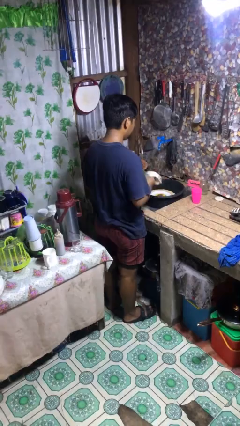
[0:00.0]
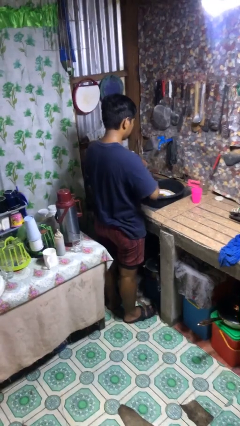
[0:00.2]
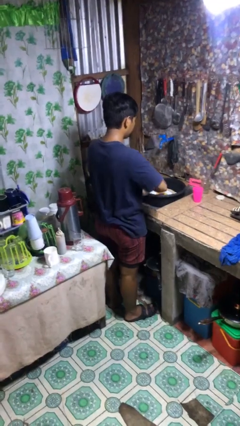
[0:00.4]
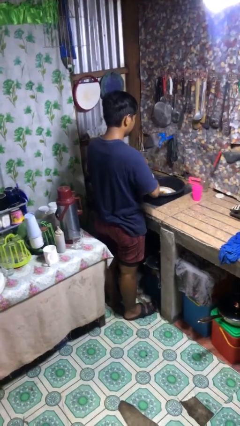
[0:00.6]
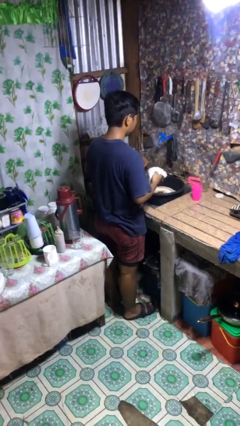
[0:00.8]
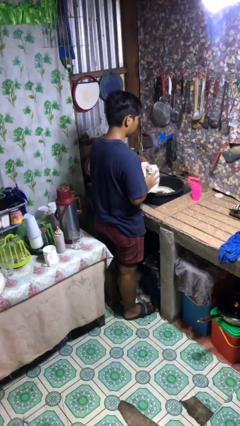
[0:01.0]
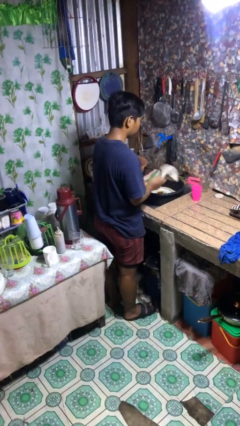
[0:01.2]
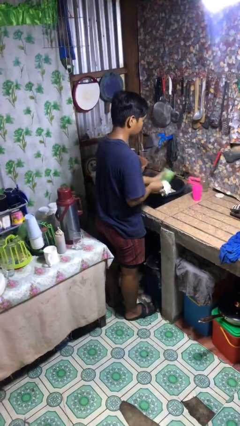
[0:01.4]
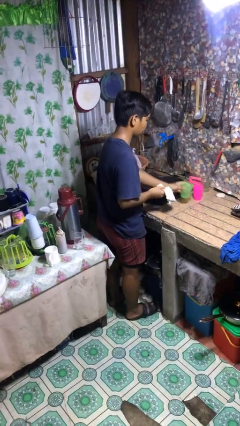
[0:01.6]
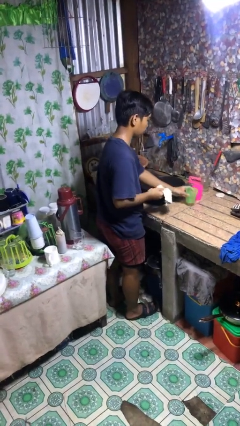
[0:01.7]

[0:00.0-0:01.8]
person dries dish

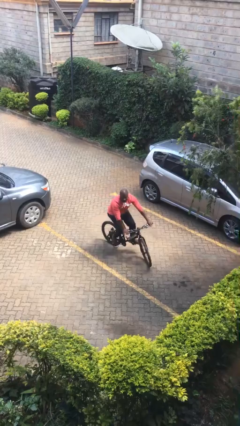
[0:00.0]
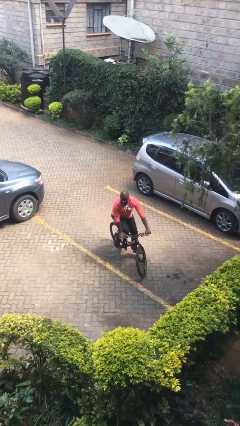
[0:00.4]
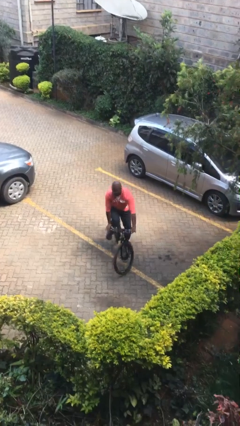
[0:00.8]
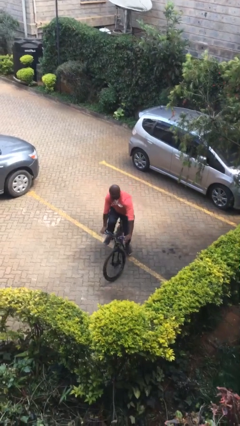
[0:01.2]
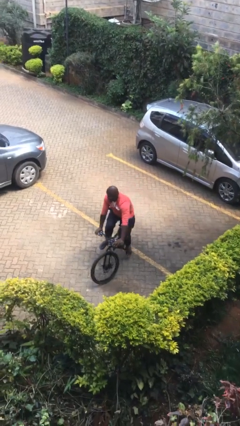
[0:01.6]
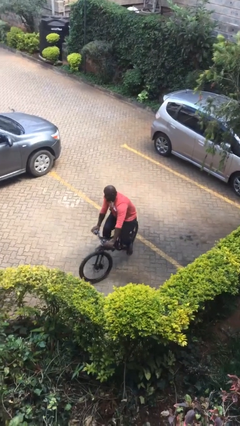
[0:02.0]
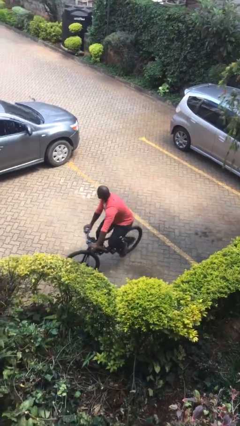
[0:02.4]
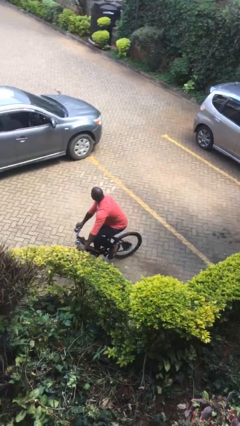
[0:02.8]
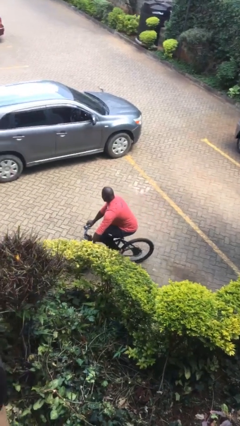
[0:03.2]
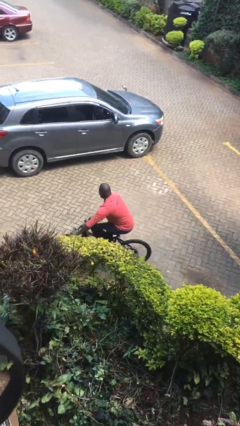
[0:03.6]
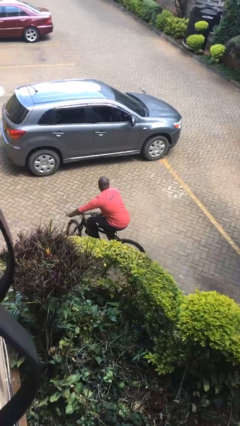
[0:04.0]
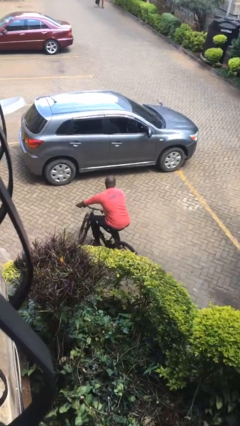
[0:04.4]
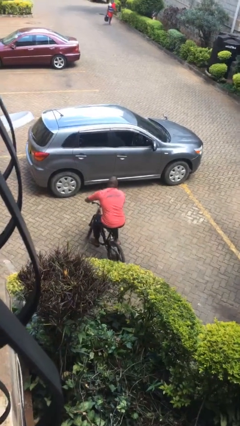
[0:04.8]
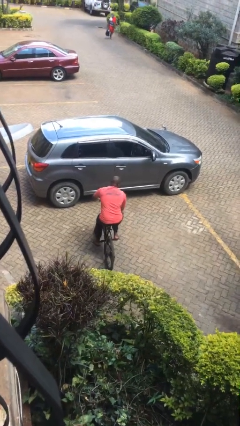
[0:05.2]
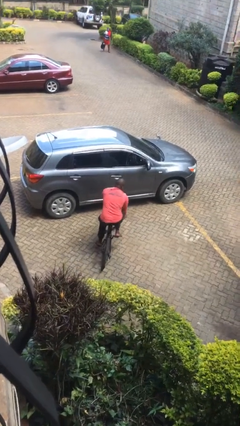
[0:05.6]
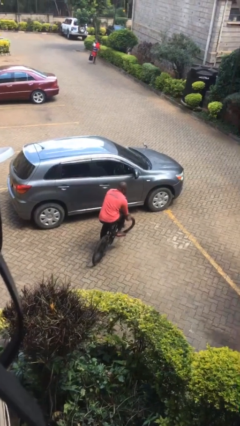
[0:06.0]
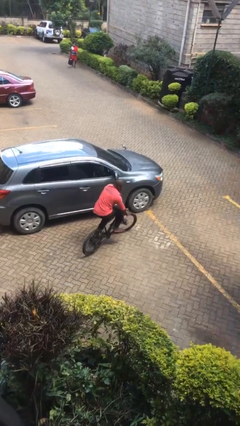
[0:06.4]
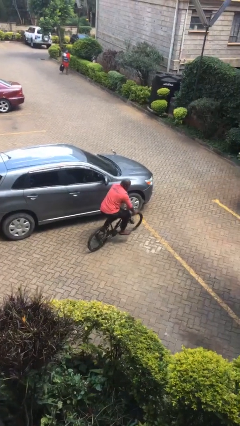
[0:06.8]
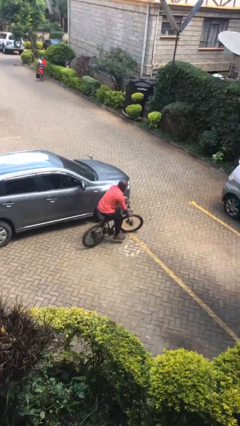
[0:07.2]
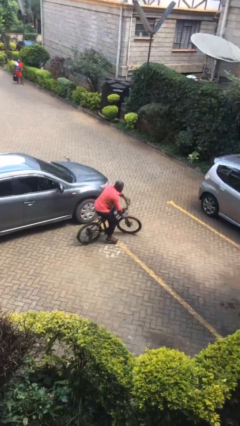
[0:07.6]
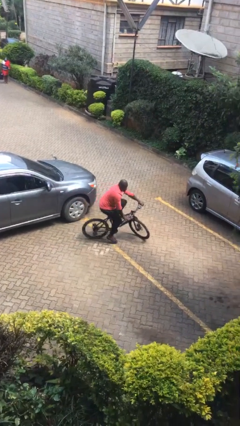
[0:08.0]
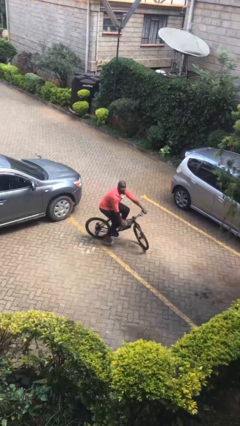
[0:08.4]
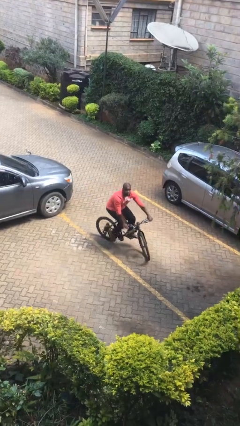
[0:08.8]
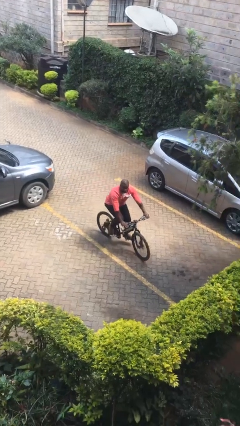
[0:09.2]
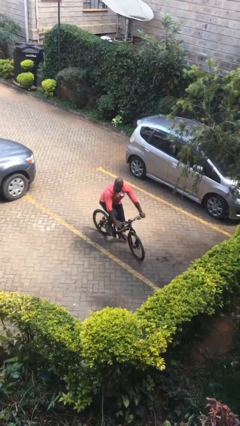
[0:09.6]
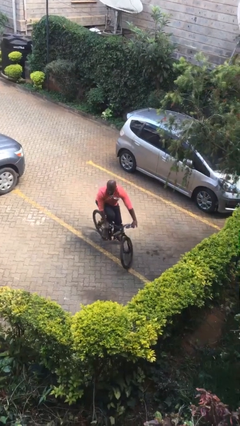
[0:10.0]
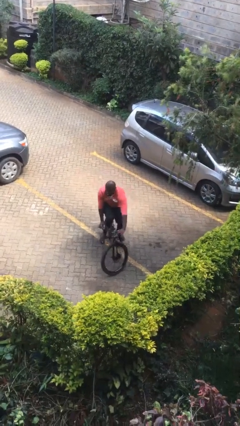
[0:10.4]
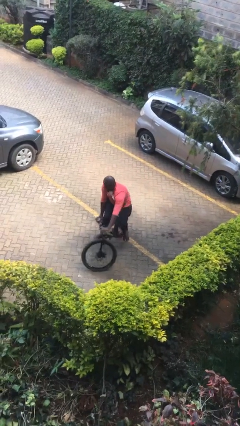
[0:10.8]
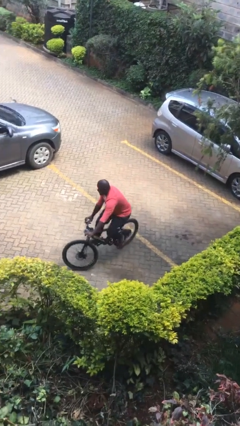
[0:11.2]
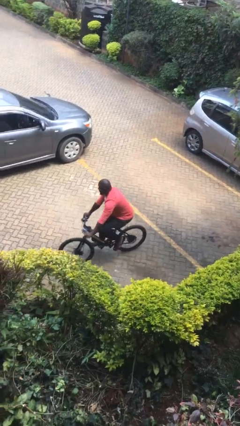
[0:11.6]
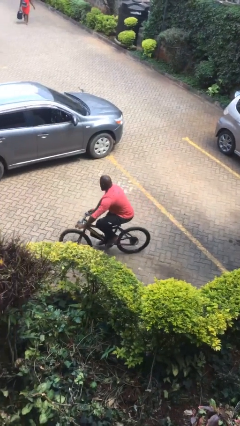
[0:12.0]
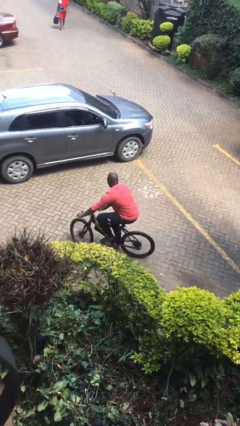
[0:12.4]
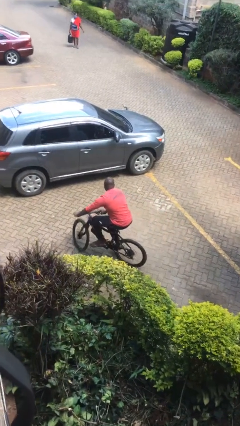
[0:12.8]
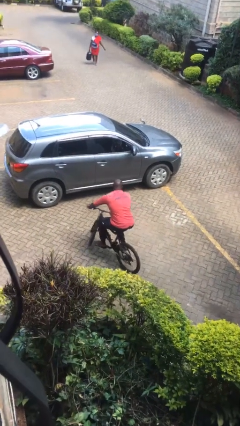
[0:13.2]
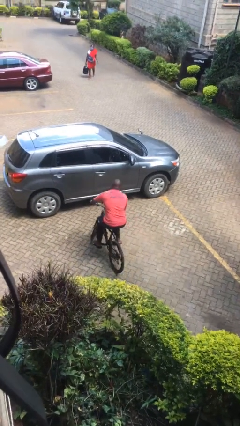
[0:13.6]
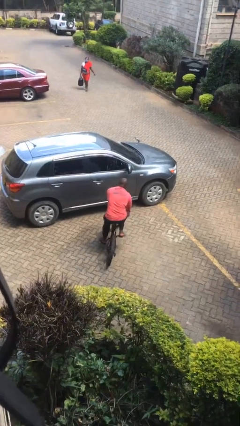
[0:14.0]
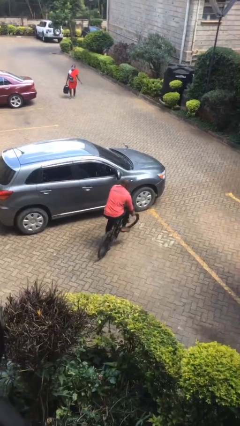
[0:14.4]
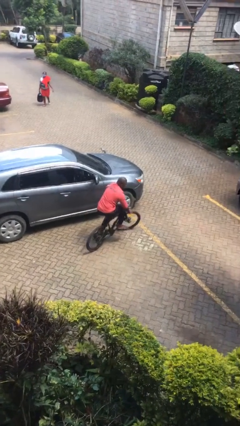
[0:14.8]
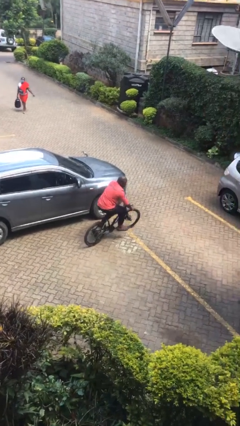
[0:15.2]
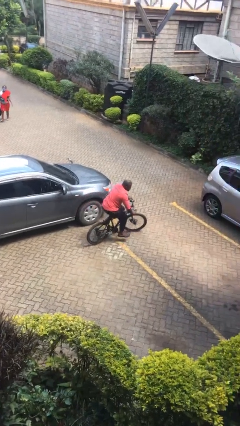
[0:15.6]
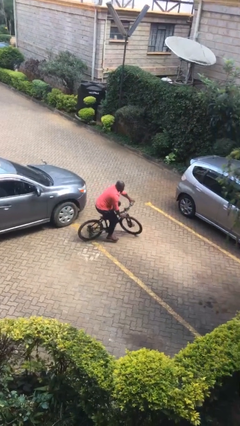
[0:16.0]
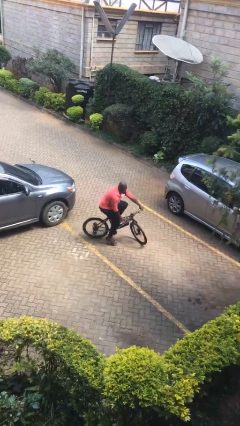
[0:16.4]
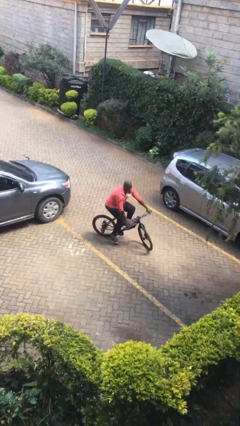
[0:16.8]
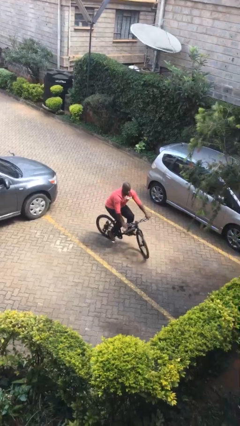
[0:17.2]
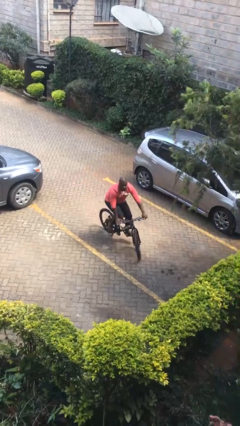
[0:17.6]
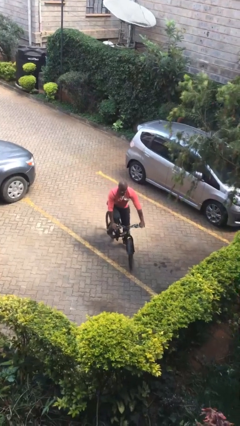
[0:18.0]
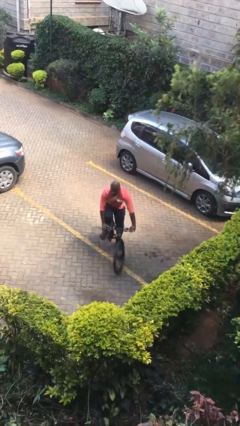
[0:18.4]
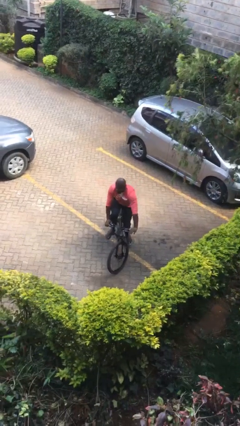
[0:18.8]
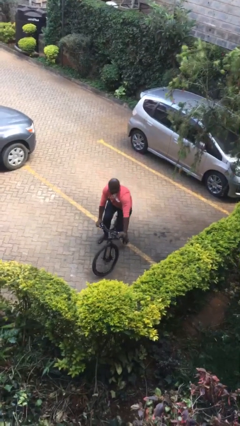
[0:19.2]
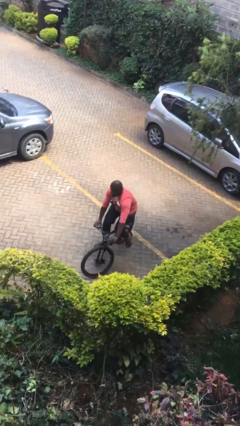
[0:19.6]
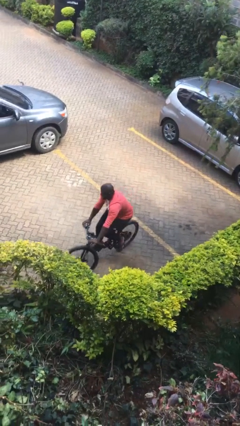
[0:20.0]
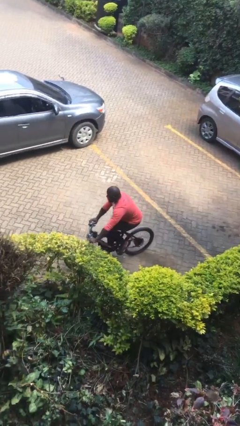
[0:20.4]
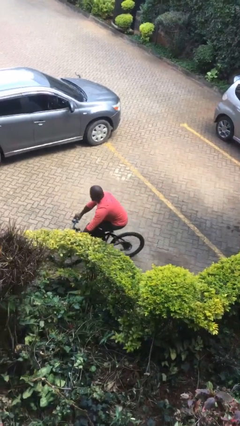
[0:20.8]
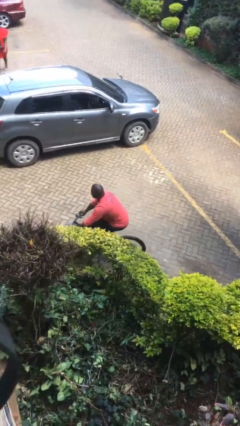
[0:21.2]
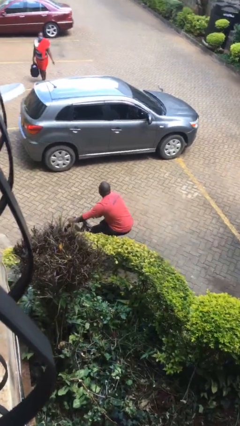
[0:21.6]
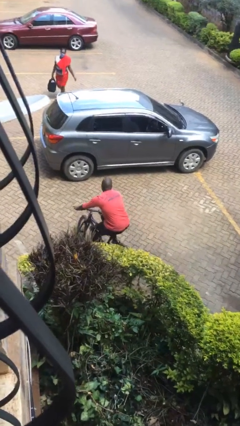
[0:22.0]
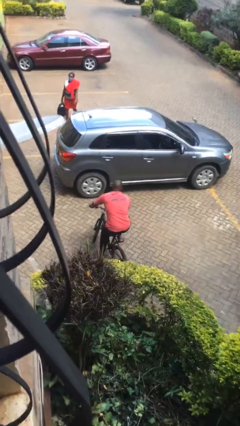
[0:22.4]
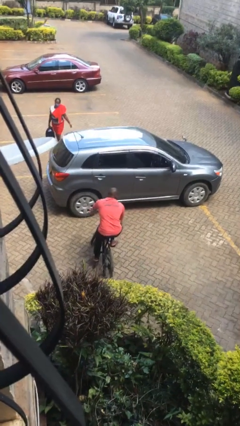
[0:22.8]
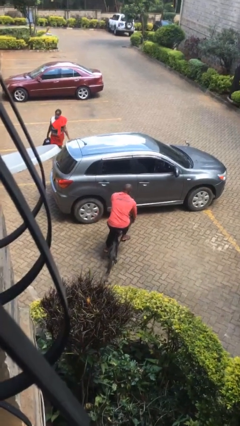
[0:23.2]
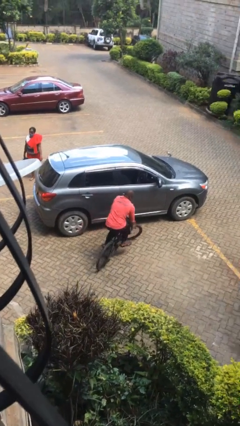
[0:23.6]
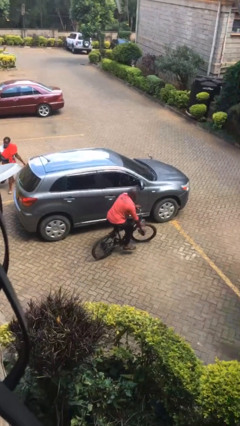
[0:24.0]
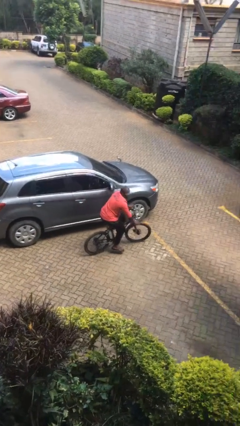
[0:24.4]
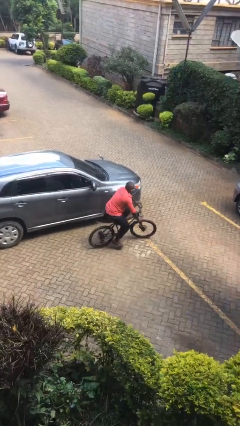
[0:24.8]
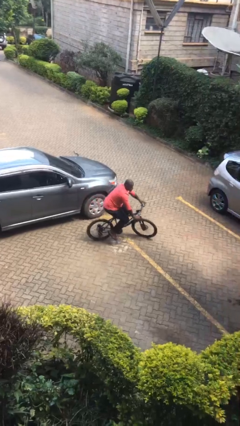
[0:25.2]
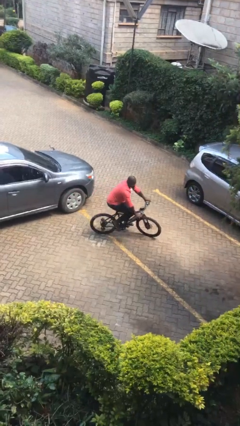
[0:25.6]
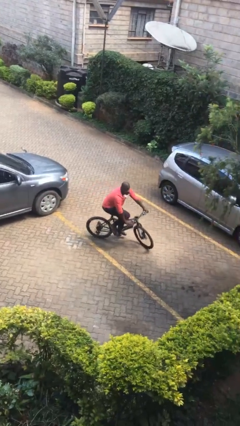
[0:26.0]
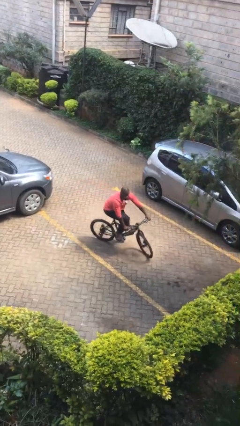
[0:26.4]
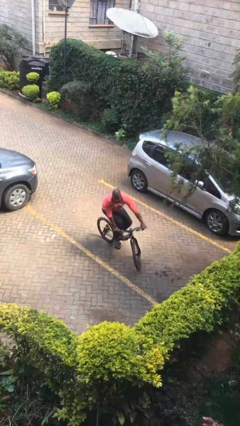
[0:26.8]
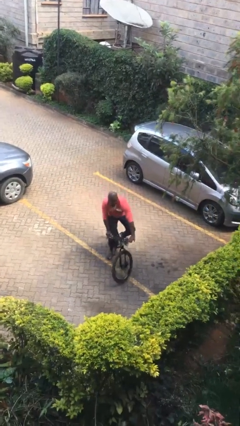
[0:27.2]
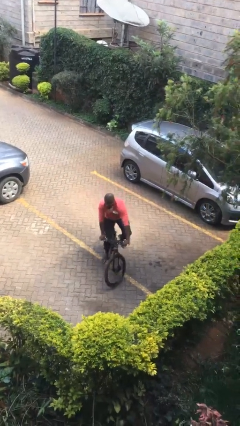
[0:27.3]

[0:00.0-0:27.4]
person rides bicycle

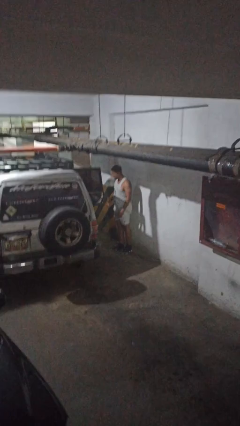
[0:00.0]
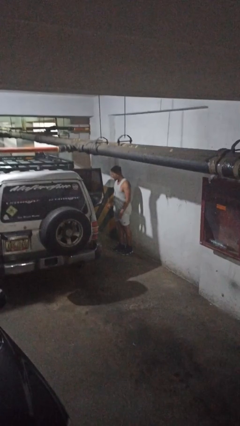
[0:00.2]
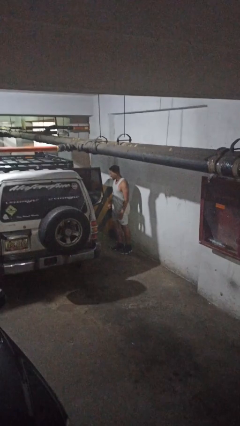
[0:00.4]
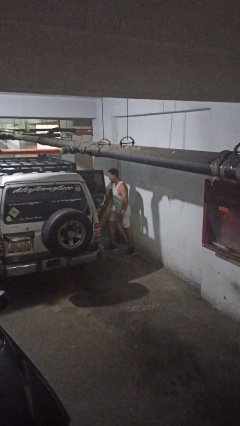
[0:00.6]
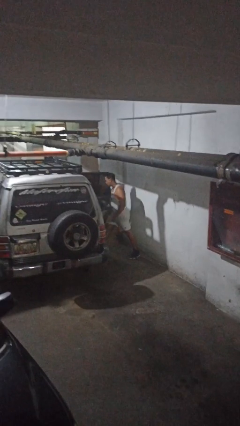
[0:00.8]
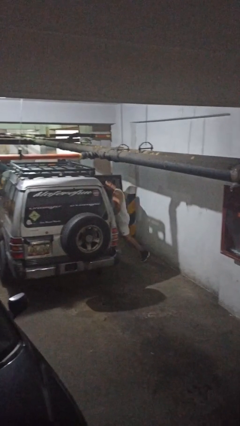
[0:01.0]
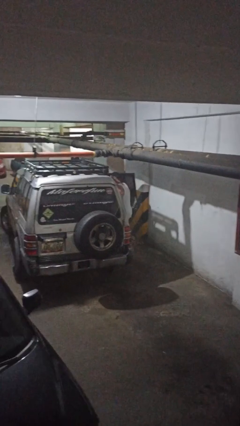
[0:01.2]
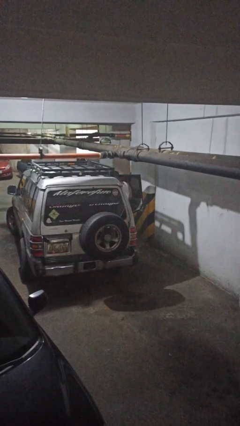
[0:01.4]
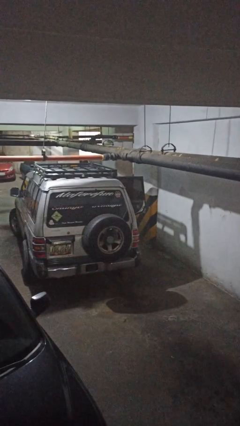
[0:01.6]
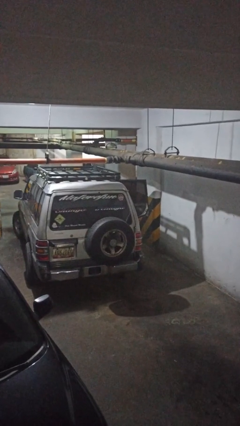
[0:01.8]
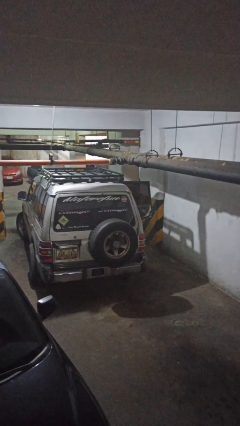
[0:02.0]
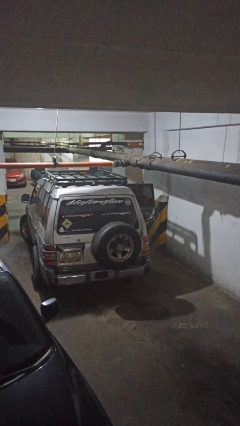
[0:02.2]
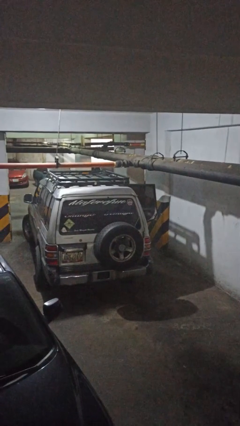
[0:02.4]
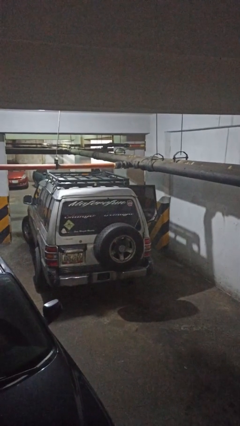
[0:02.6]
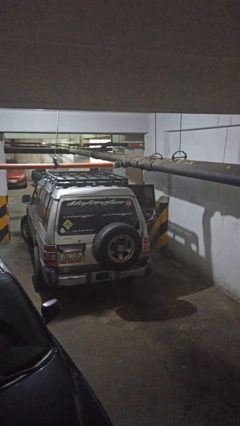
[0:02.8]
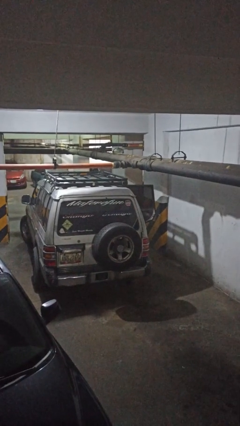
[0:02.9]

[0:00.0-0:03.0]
person enters car
